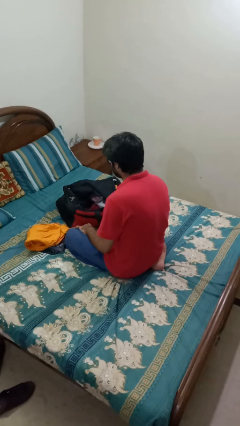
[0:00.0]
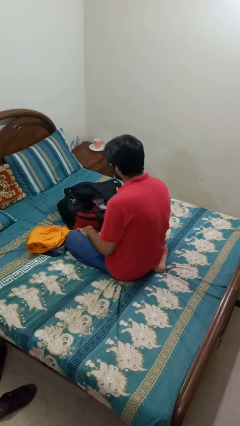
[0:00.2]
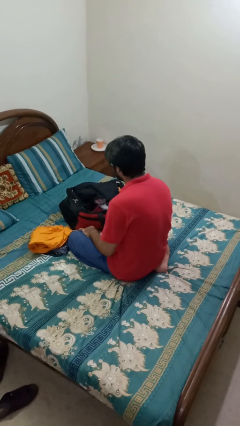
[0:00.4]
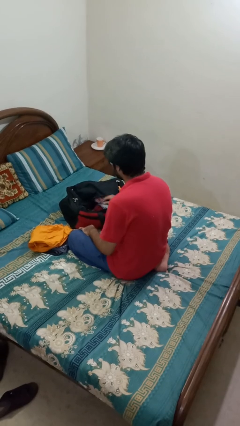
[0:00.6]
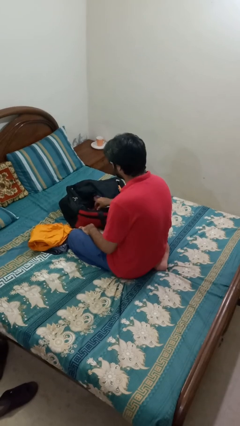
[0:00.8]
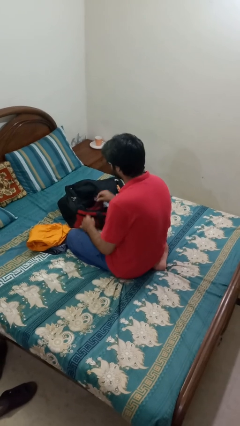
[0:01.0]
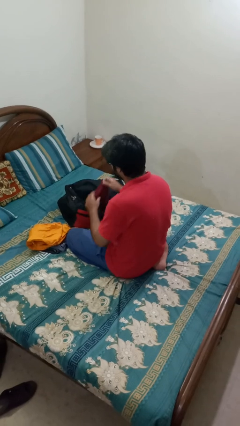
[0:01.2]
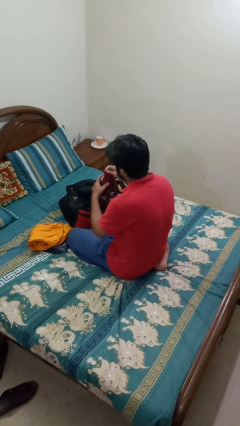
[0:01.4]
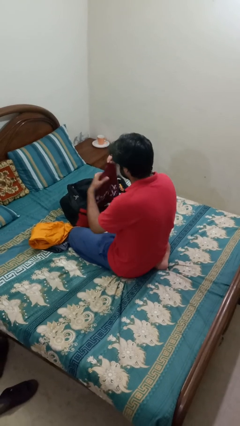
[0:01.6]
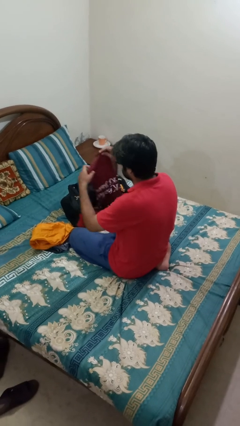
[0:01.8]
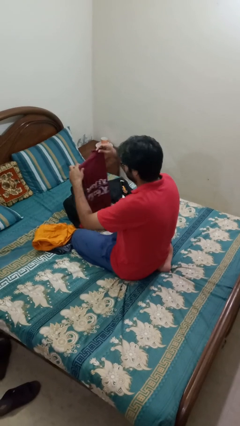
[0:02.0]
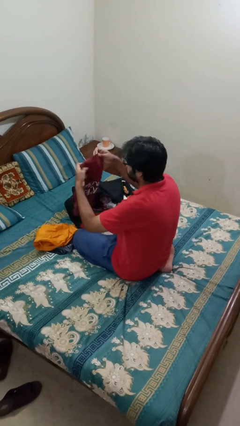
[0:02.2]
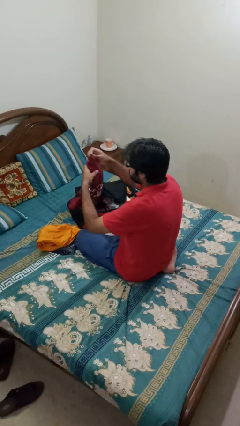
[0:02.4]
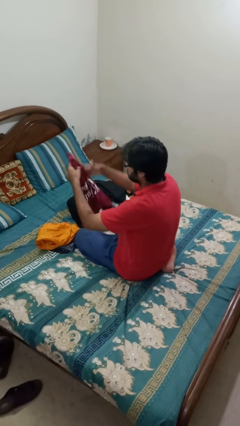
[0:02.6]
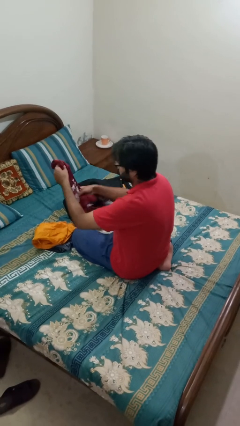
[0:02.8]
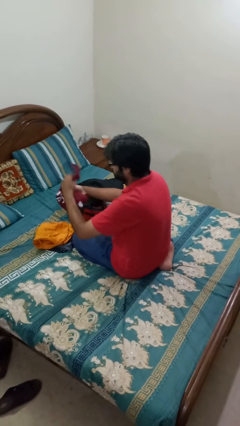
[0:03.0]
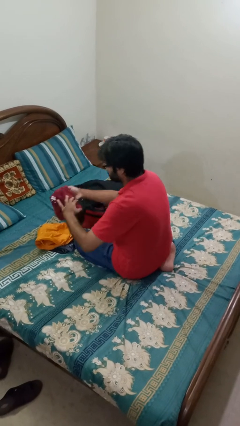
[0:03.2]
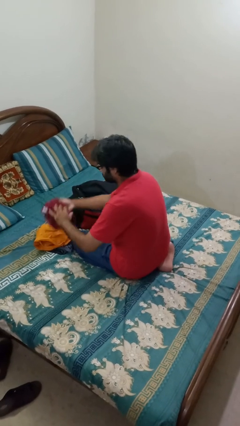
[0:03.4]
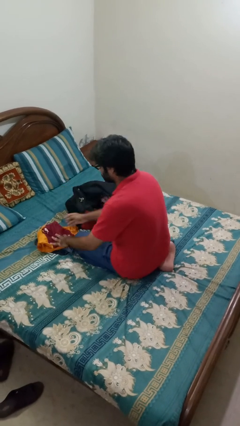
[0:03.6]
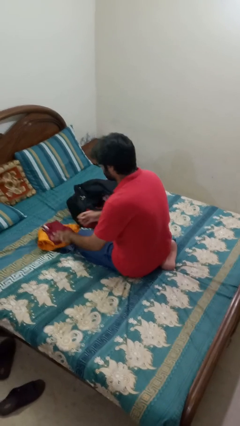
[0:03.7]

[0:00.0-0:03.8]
person unloads clothes from suitcase

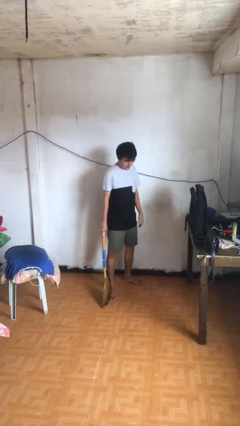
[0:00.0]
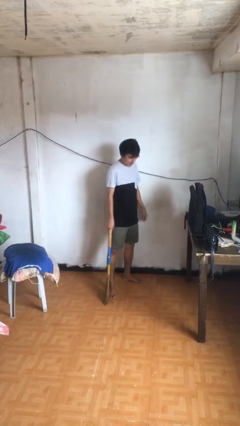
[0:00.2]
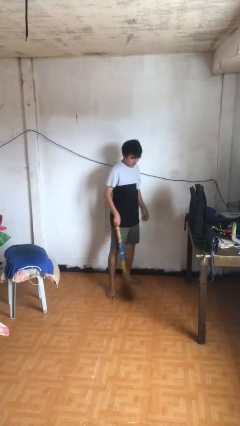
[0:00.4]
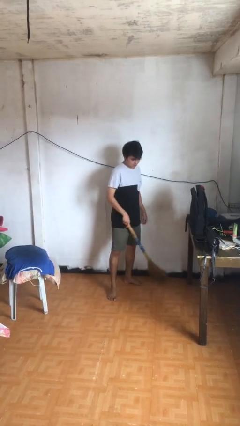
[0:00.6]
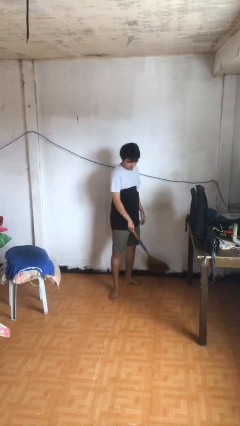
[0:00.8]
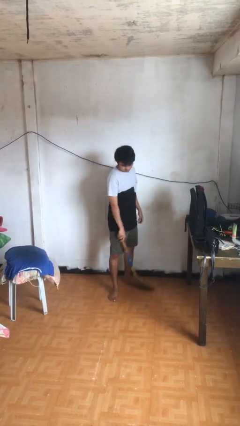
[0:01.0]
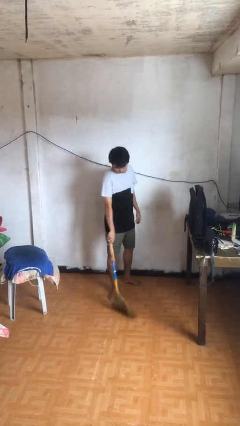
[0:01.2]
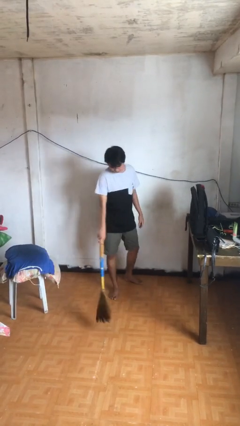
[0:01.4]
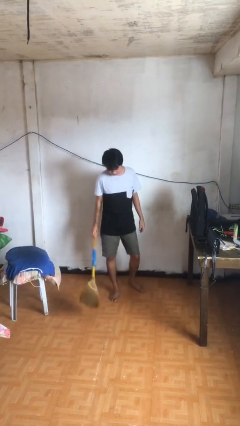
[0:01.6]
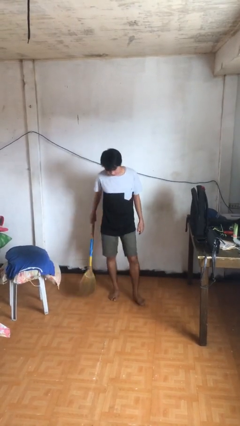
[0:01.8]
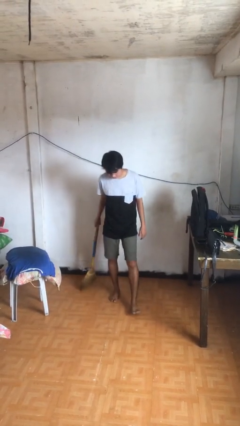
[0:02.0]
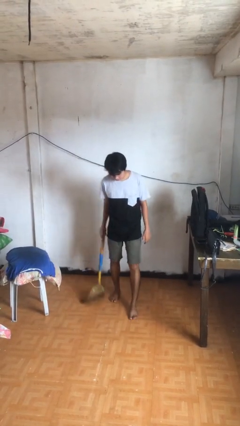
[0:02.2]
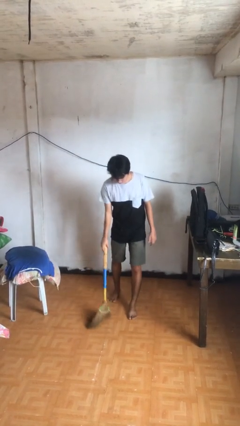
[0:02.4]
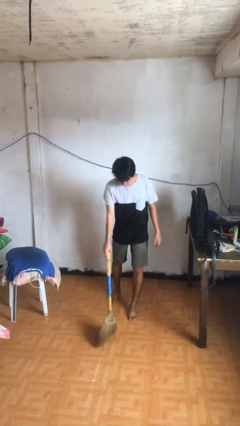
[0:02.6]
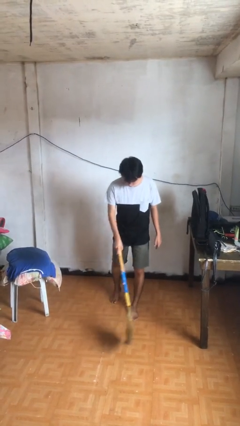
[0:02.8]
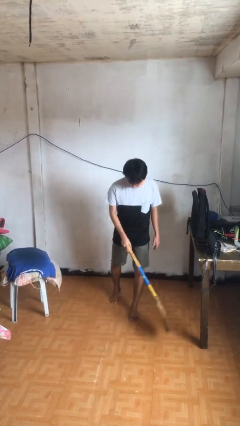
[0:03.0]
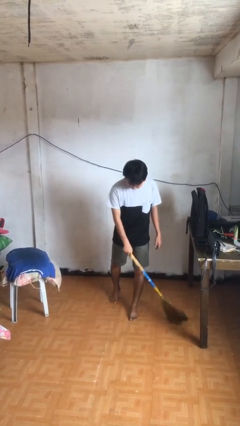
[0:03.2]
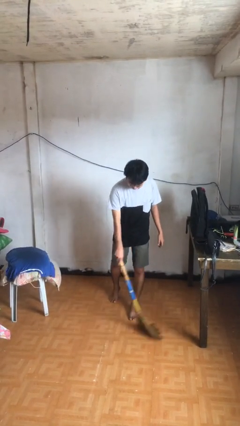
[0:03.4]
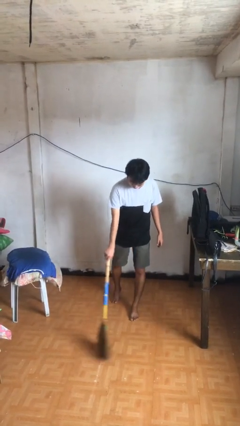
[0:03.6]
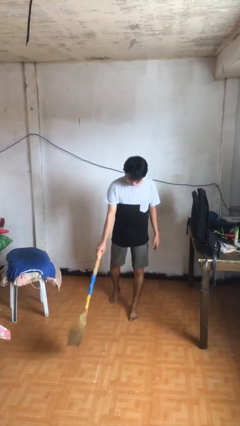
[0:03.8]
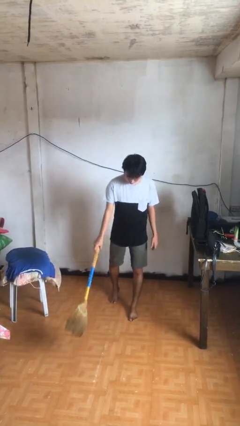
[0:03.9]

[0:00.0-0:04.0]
person sweeps floor

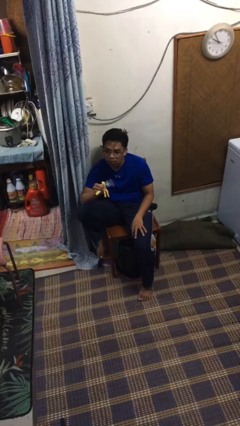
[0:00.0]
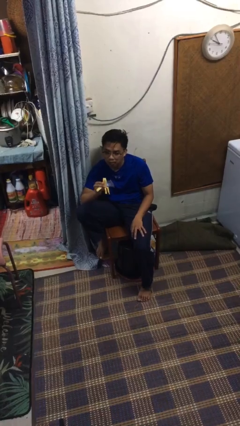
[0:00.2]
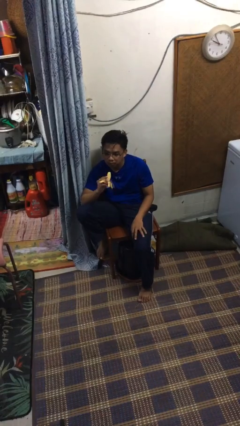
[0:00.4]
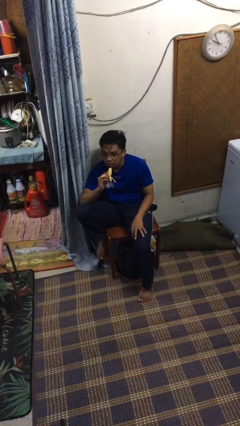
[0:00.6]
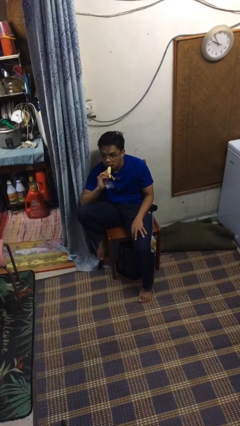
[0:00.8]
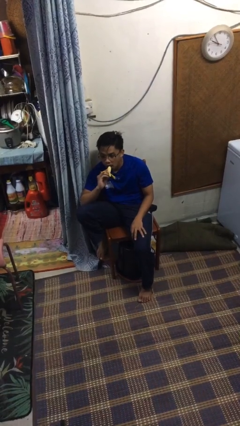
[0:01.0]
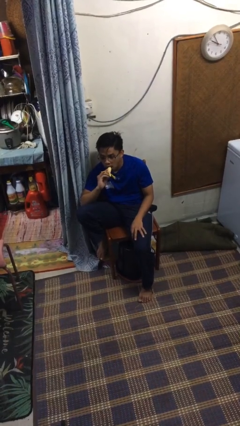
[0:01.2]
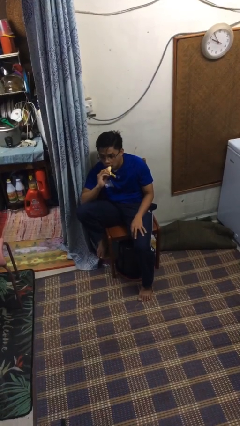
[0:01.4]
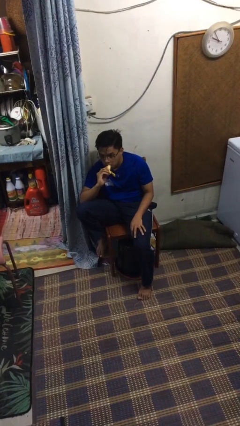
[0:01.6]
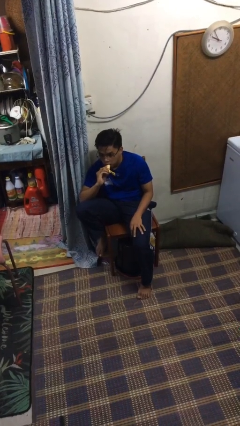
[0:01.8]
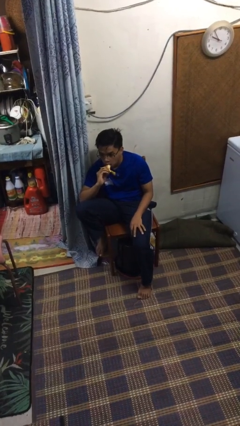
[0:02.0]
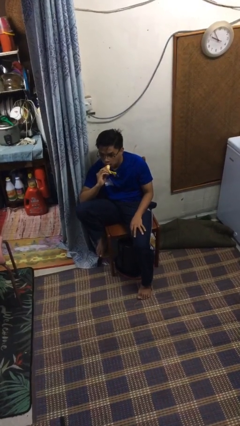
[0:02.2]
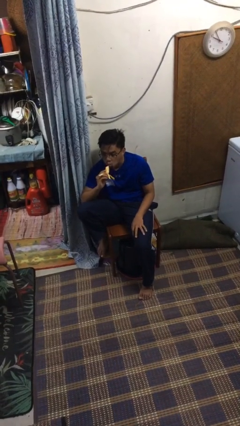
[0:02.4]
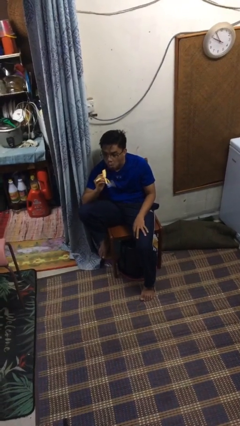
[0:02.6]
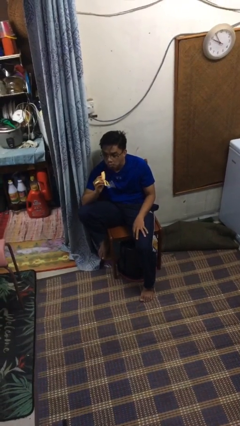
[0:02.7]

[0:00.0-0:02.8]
person eats banana

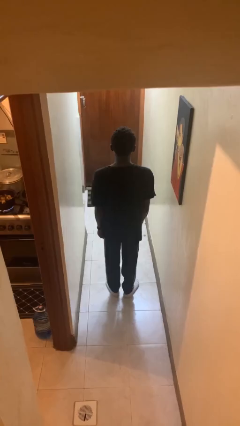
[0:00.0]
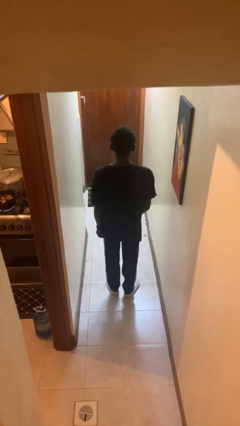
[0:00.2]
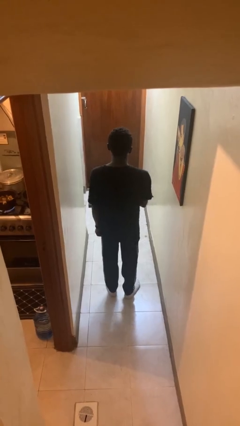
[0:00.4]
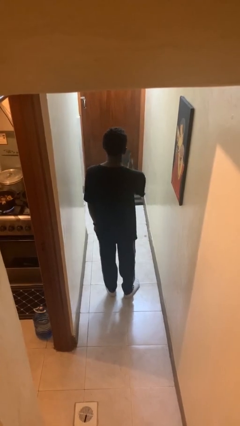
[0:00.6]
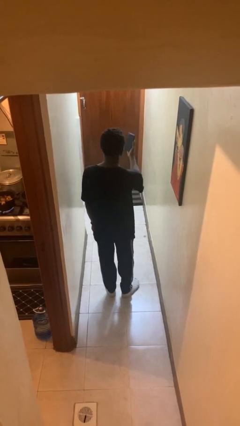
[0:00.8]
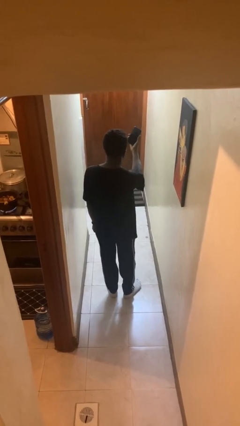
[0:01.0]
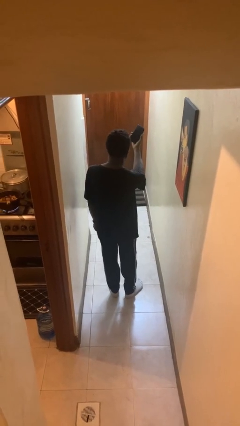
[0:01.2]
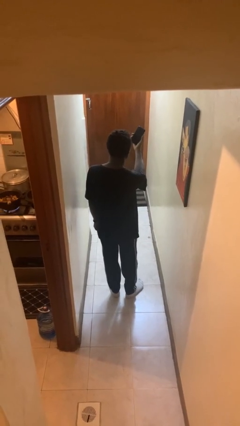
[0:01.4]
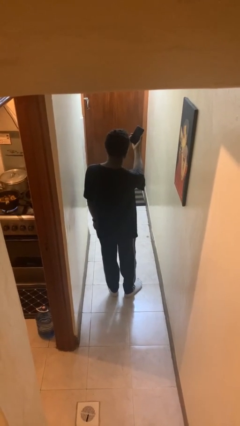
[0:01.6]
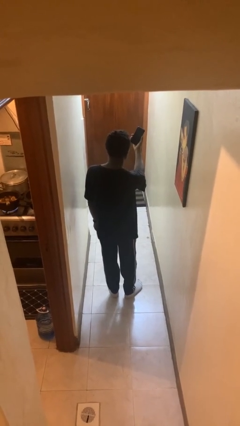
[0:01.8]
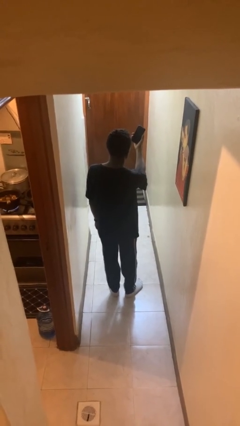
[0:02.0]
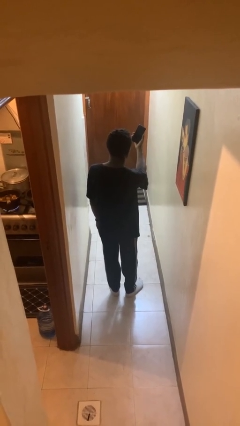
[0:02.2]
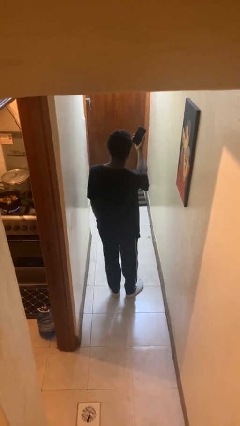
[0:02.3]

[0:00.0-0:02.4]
person takes selfie

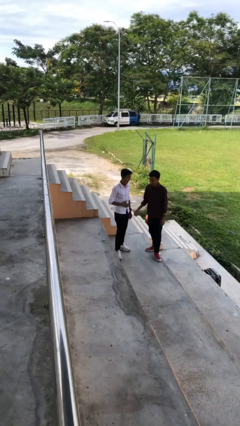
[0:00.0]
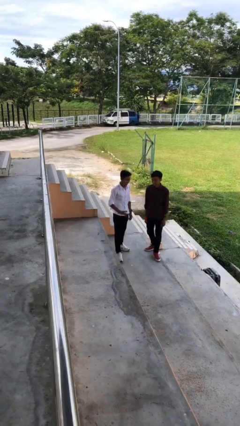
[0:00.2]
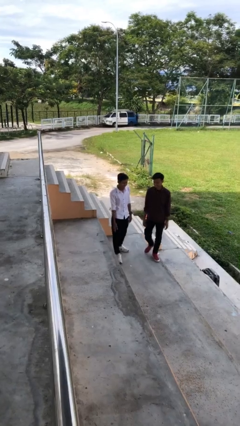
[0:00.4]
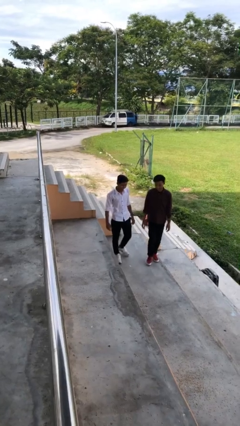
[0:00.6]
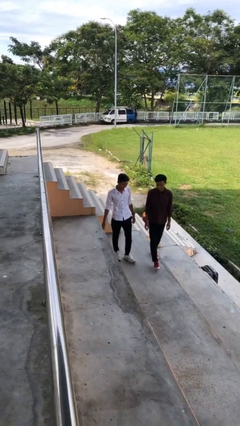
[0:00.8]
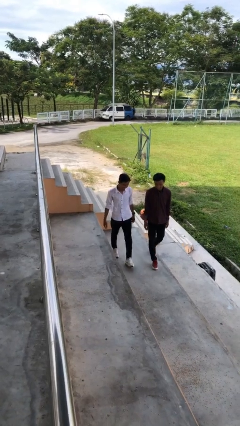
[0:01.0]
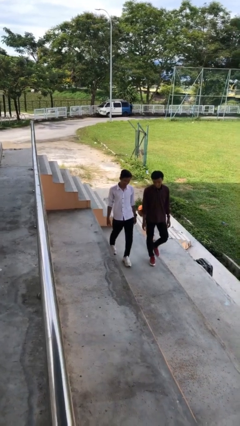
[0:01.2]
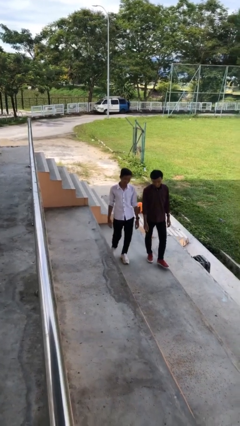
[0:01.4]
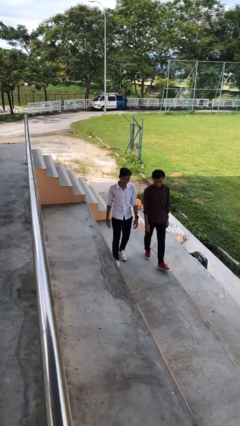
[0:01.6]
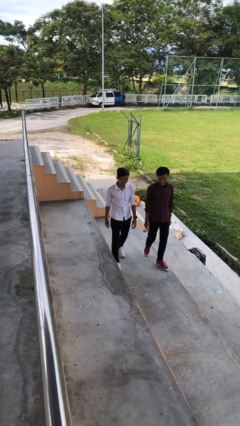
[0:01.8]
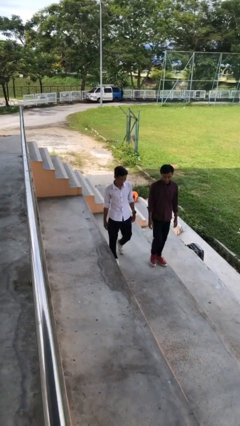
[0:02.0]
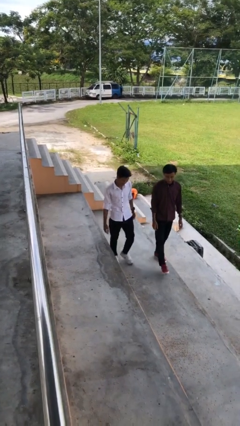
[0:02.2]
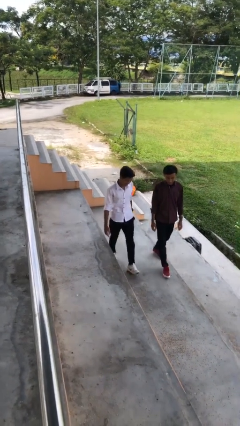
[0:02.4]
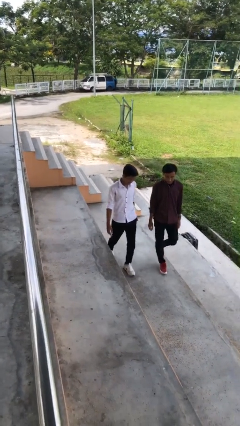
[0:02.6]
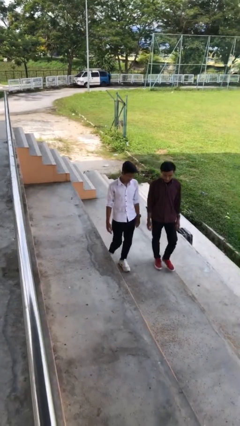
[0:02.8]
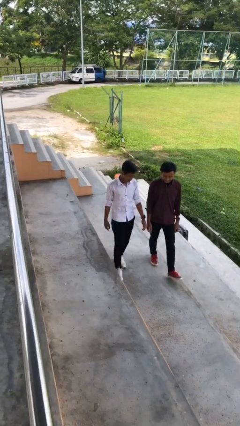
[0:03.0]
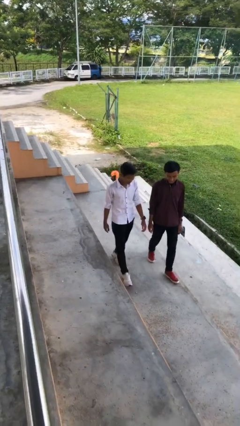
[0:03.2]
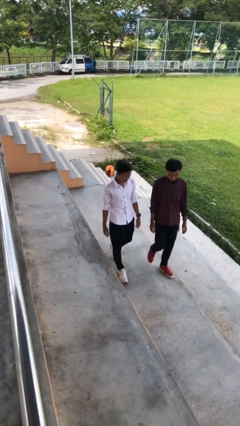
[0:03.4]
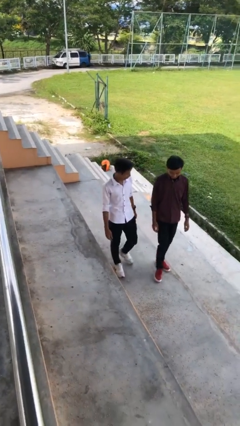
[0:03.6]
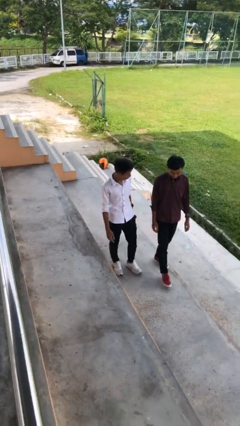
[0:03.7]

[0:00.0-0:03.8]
person talks to person

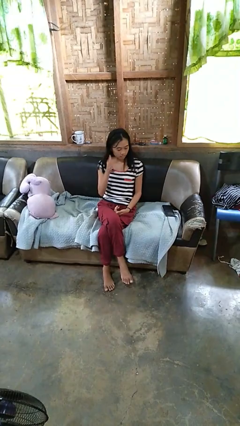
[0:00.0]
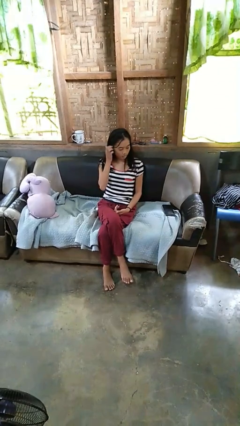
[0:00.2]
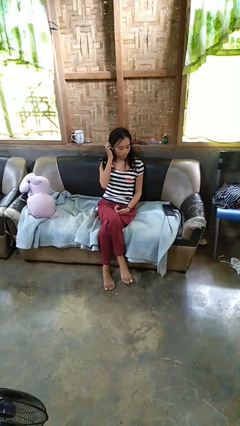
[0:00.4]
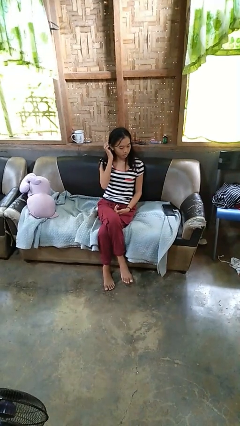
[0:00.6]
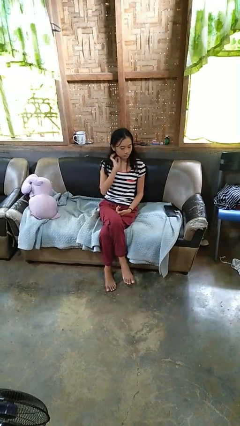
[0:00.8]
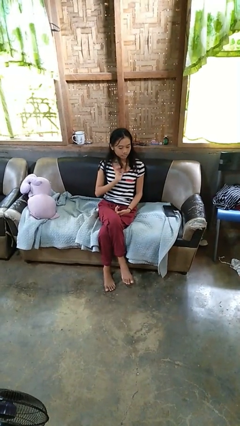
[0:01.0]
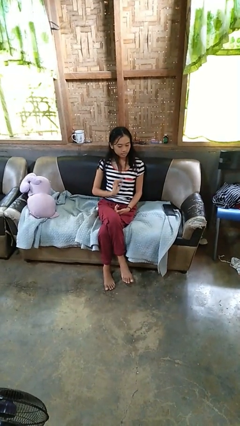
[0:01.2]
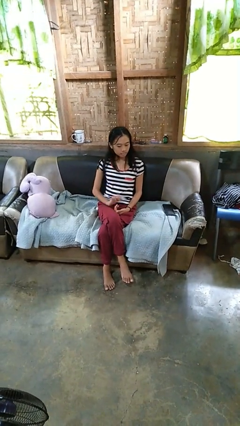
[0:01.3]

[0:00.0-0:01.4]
person strokes hair
